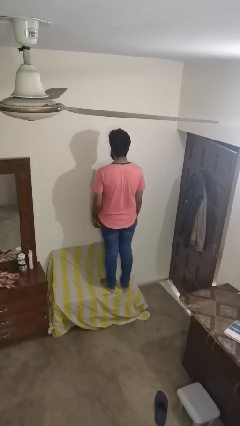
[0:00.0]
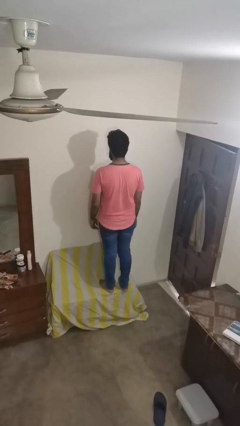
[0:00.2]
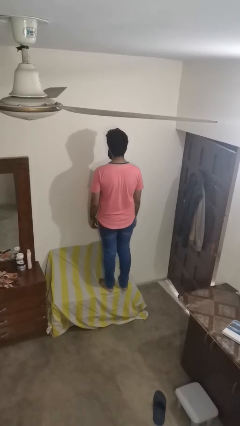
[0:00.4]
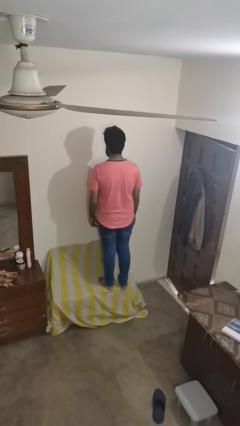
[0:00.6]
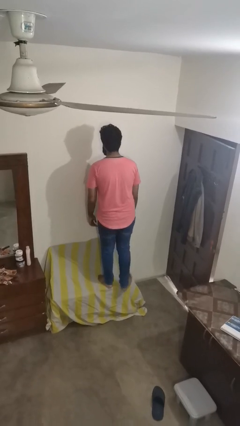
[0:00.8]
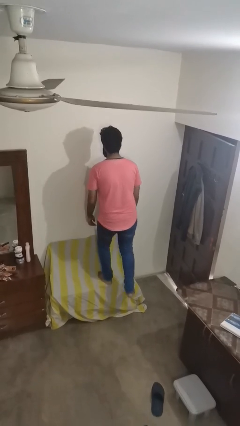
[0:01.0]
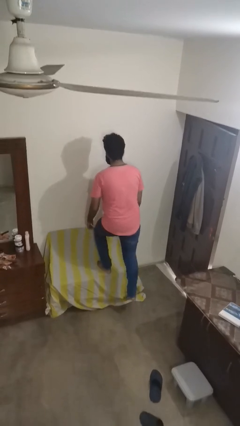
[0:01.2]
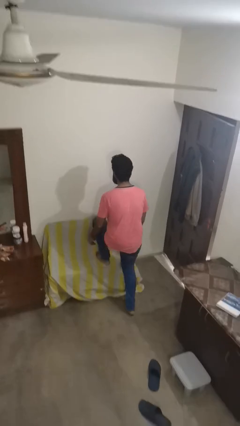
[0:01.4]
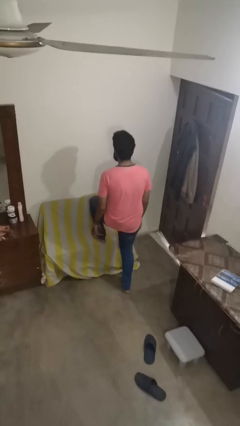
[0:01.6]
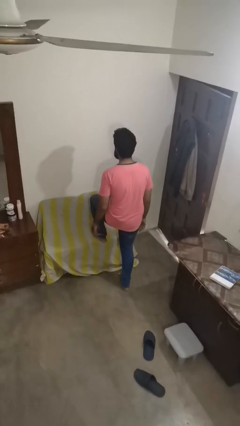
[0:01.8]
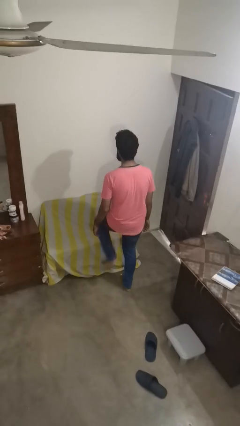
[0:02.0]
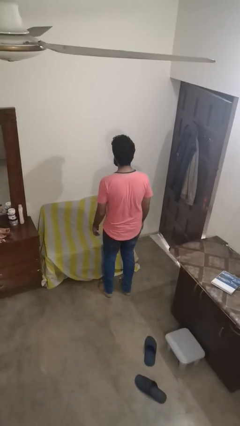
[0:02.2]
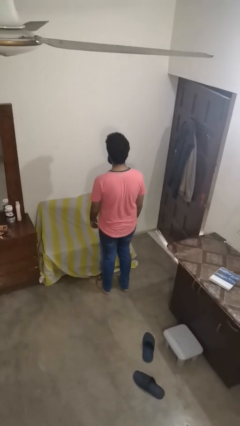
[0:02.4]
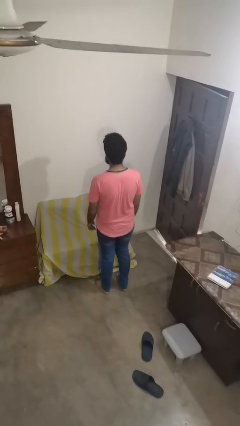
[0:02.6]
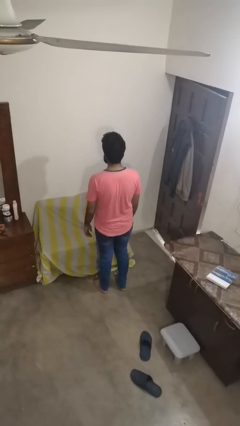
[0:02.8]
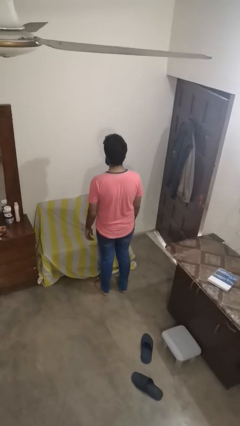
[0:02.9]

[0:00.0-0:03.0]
person climbs off couch

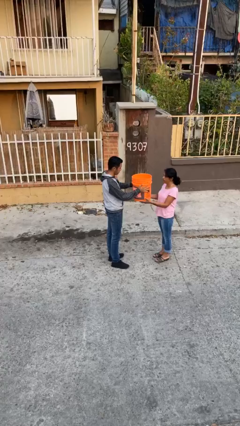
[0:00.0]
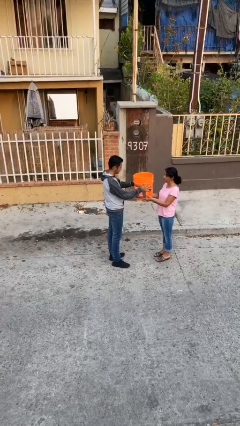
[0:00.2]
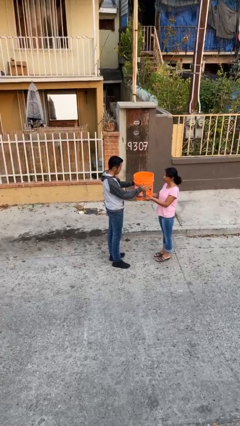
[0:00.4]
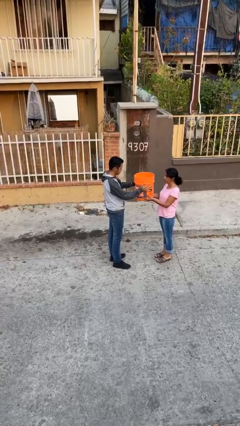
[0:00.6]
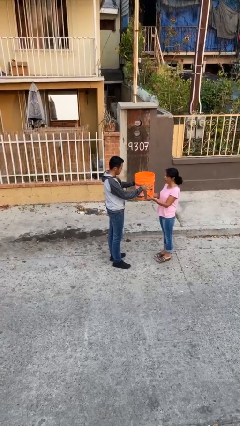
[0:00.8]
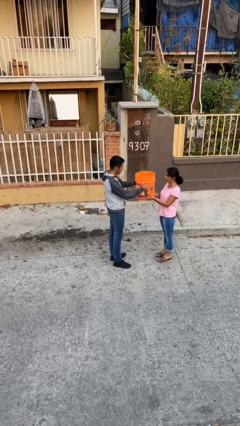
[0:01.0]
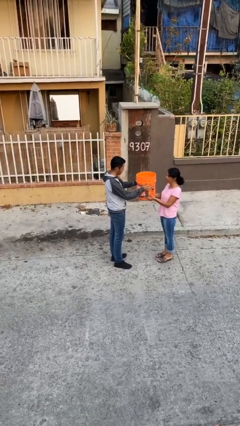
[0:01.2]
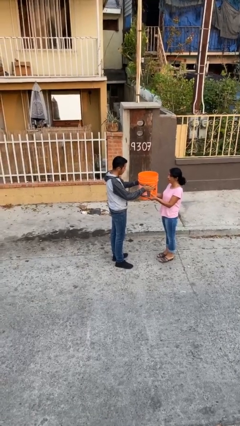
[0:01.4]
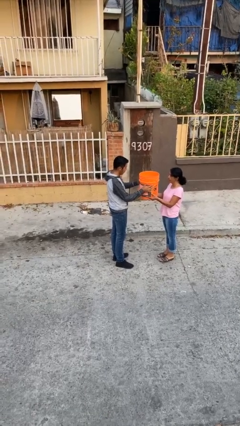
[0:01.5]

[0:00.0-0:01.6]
person transfers object to person

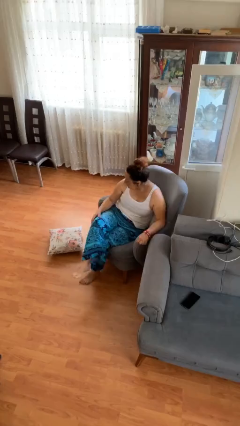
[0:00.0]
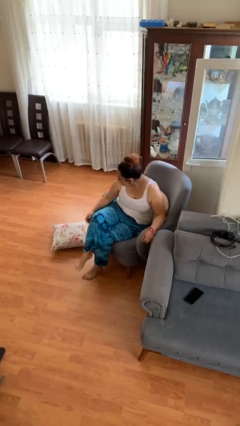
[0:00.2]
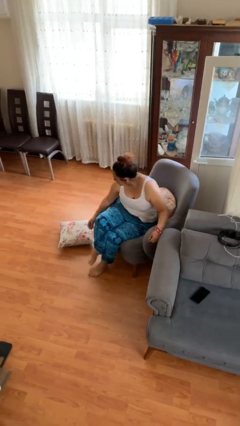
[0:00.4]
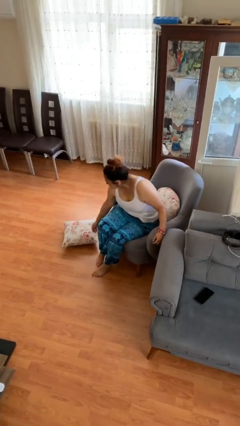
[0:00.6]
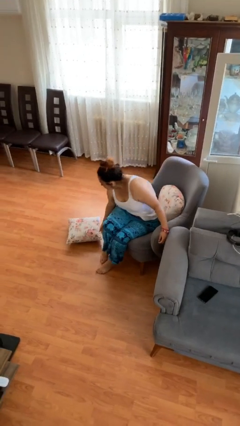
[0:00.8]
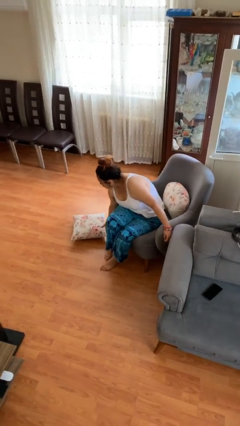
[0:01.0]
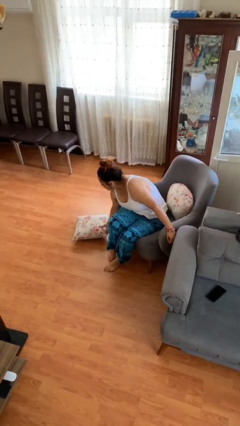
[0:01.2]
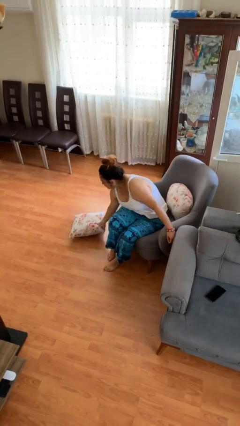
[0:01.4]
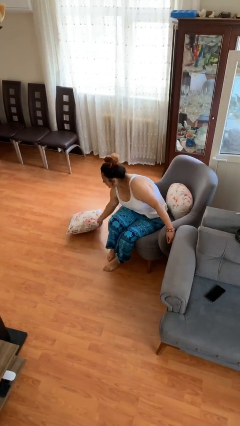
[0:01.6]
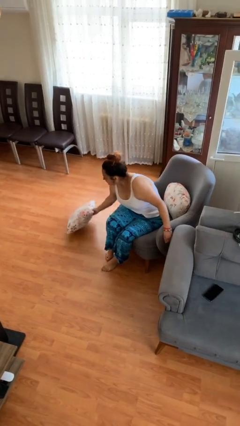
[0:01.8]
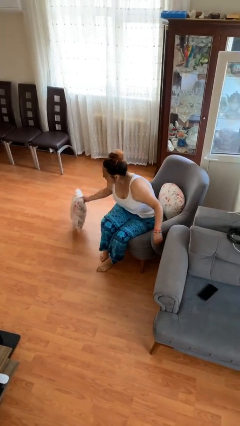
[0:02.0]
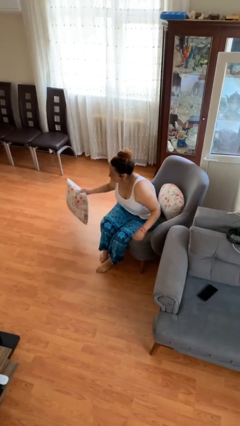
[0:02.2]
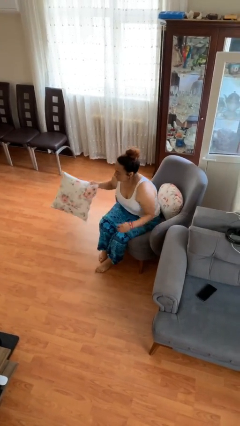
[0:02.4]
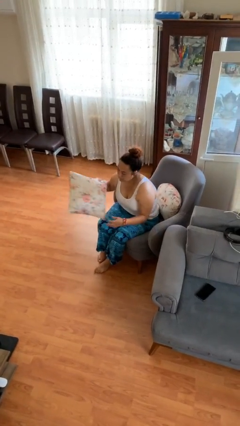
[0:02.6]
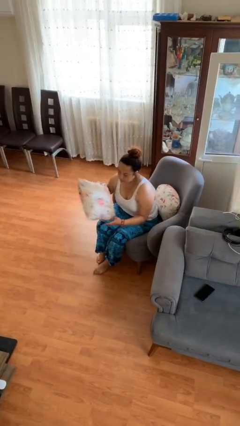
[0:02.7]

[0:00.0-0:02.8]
person picks up object from floor

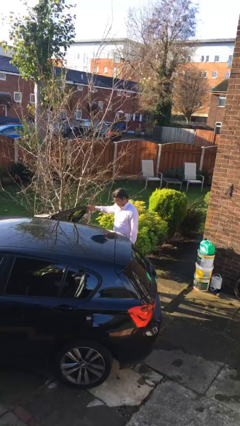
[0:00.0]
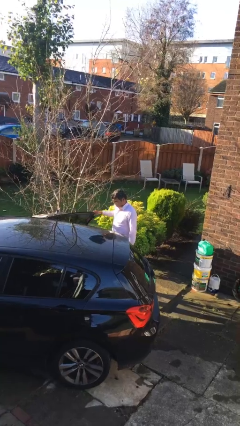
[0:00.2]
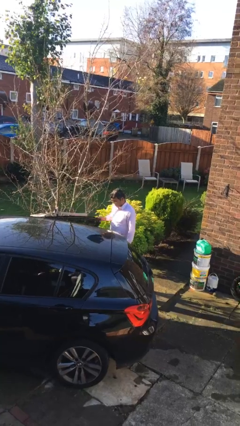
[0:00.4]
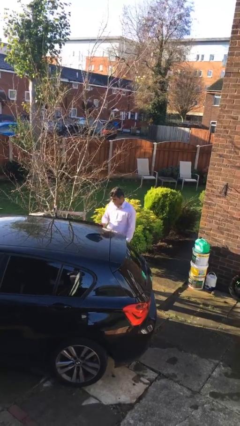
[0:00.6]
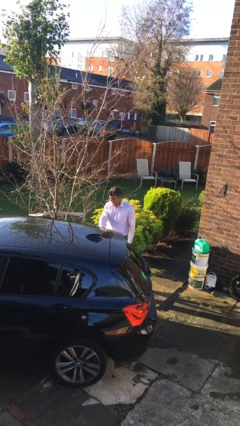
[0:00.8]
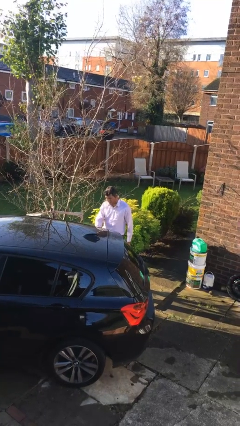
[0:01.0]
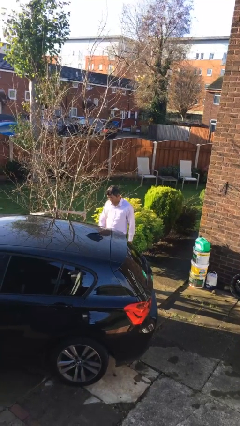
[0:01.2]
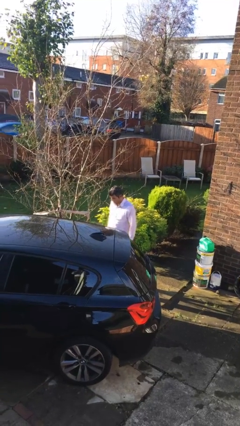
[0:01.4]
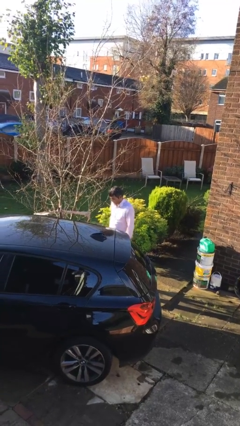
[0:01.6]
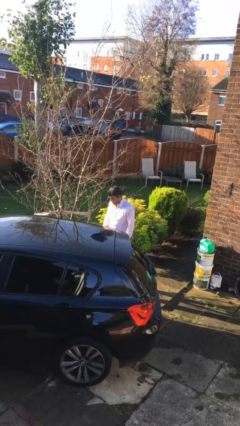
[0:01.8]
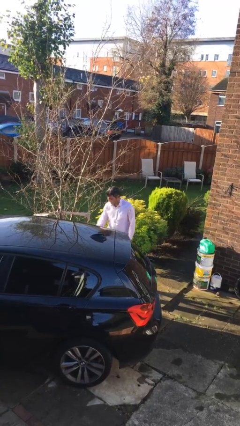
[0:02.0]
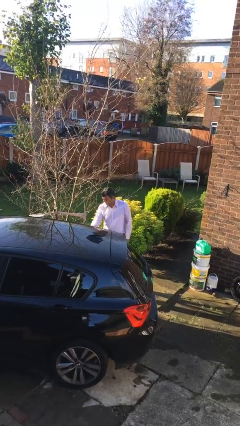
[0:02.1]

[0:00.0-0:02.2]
person closes car door

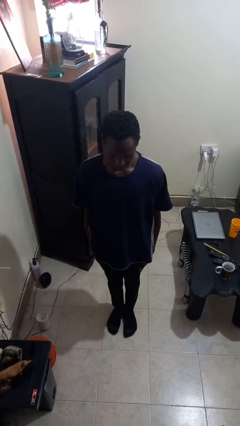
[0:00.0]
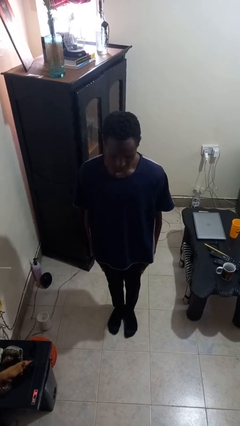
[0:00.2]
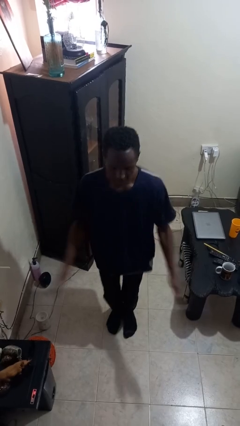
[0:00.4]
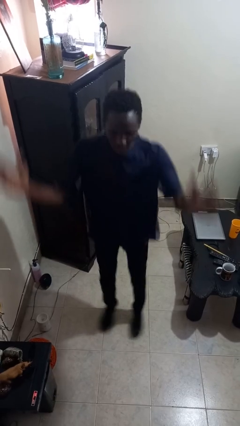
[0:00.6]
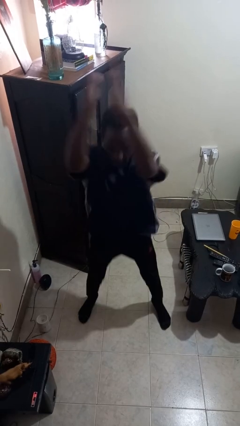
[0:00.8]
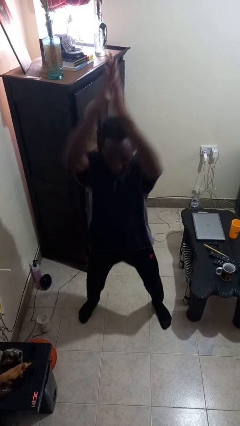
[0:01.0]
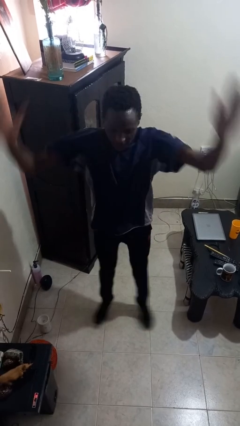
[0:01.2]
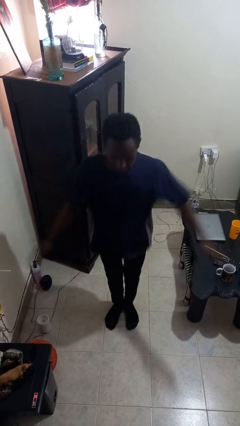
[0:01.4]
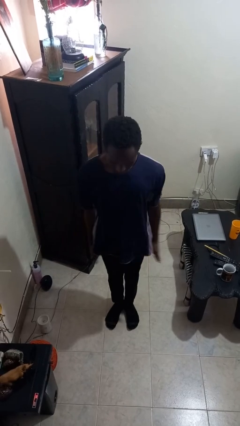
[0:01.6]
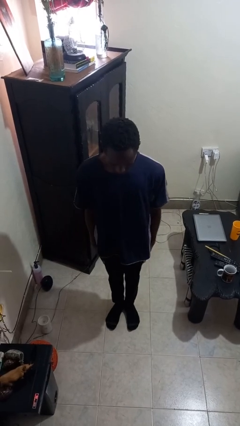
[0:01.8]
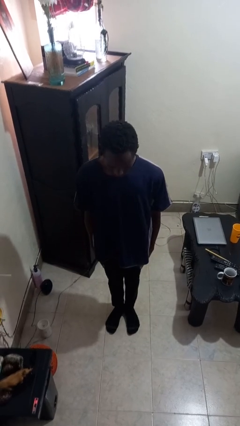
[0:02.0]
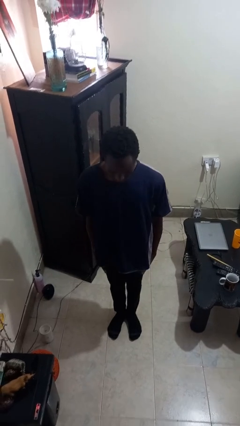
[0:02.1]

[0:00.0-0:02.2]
person exercises with jumping jacks

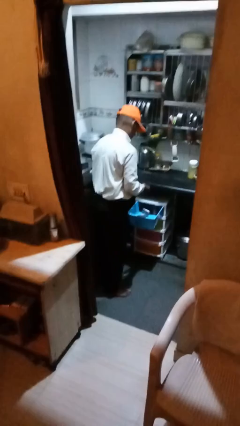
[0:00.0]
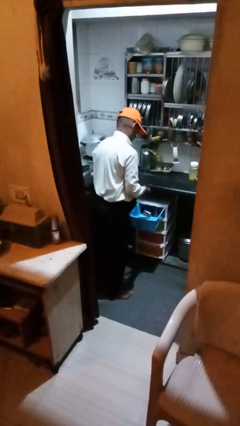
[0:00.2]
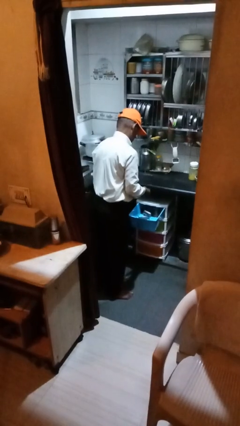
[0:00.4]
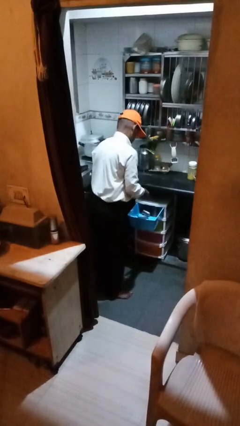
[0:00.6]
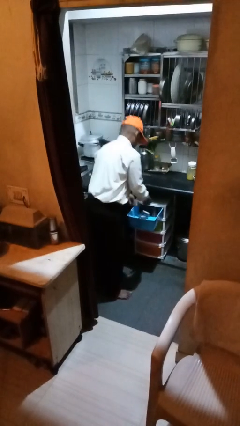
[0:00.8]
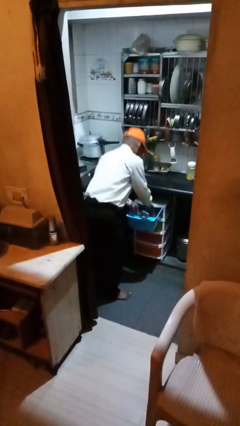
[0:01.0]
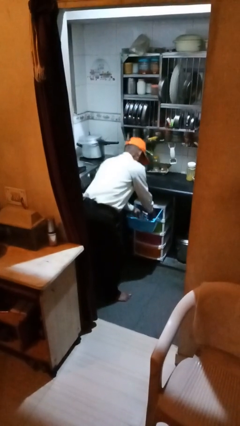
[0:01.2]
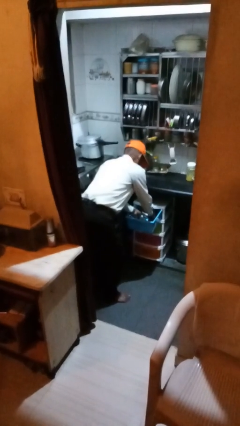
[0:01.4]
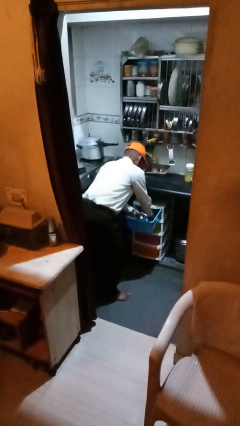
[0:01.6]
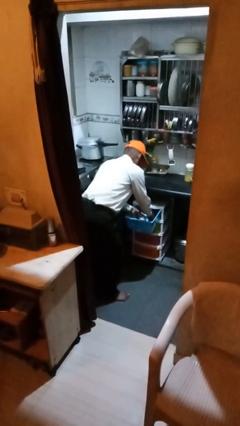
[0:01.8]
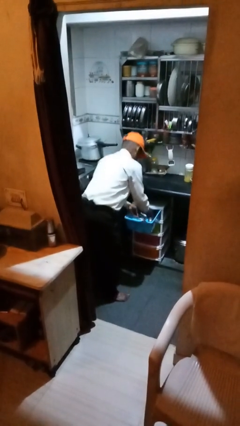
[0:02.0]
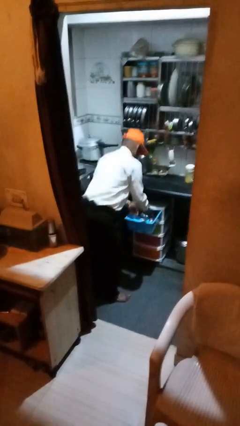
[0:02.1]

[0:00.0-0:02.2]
person puts object into kitchen drawer

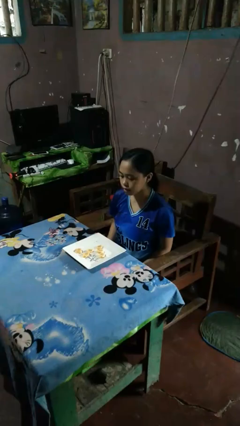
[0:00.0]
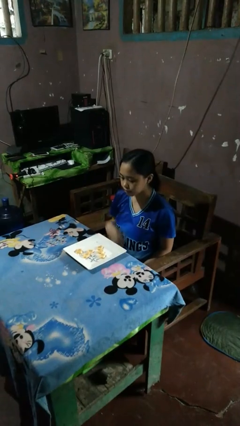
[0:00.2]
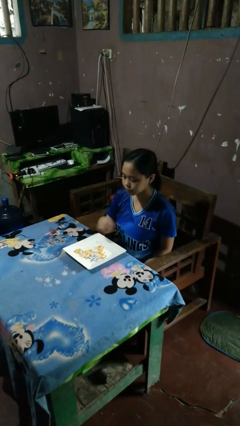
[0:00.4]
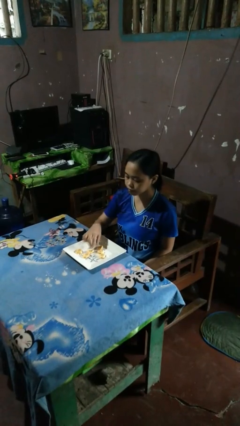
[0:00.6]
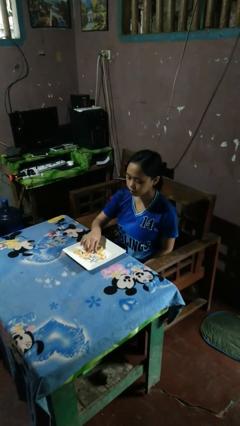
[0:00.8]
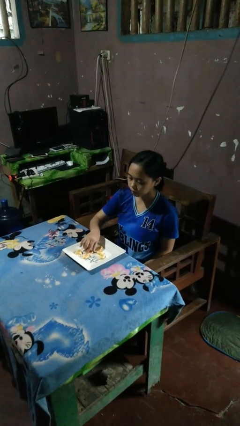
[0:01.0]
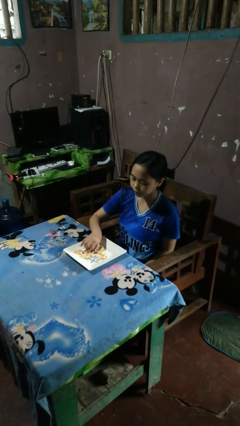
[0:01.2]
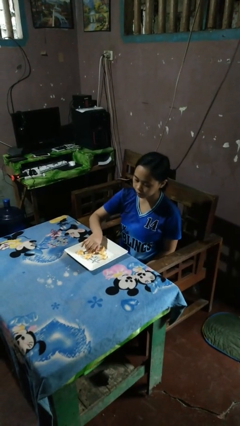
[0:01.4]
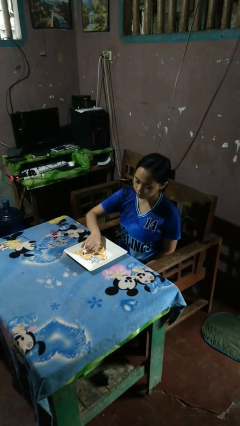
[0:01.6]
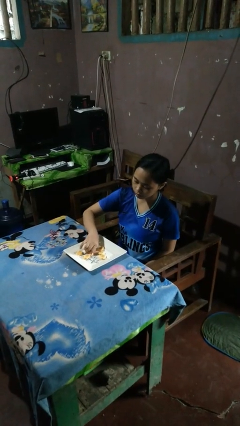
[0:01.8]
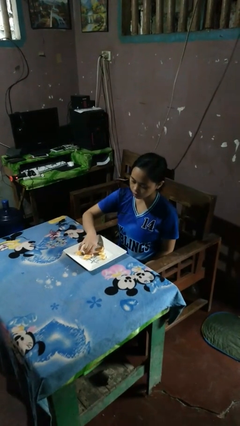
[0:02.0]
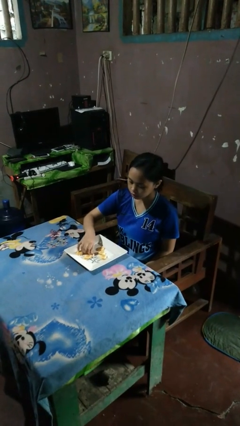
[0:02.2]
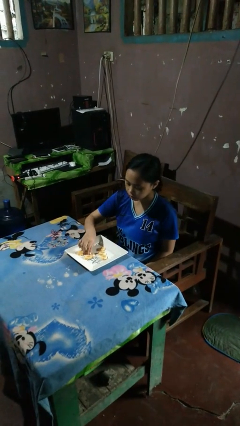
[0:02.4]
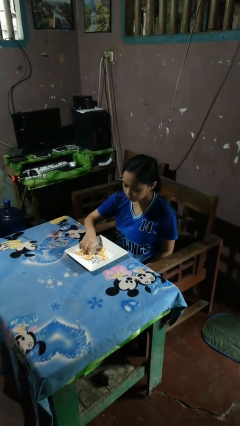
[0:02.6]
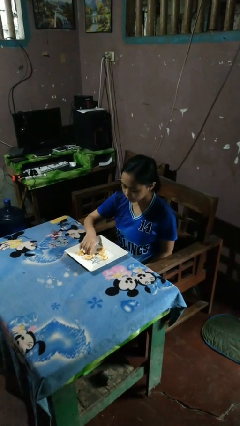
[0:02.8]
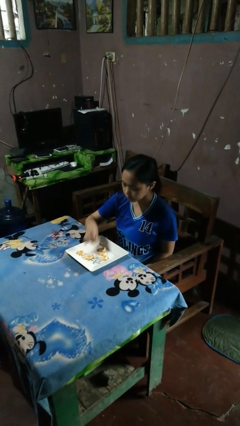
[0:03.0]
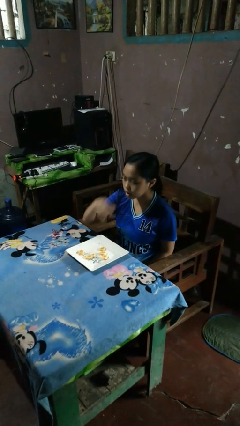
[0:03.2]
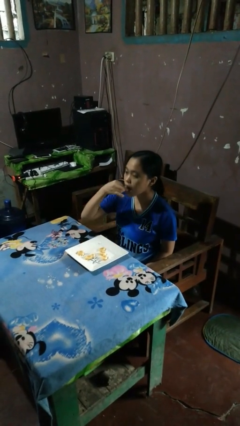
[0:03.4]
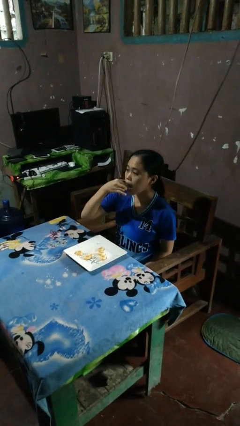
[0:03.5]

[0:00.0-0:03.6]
person eats with hands
